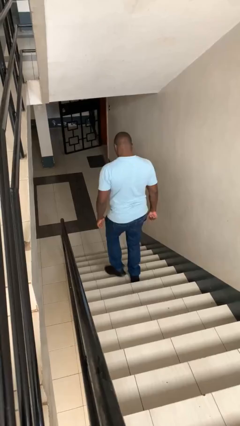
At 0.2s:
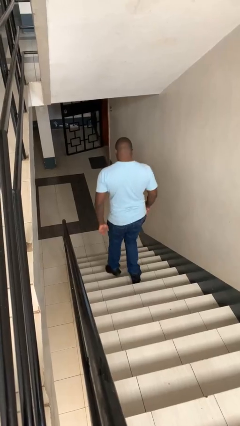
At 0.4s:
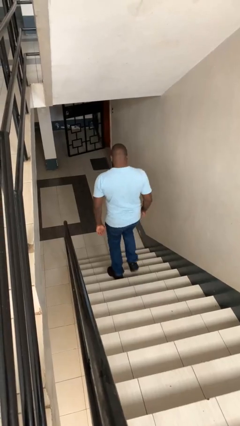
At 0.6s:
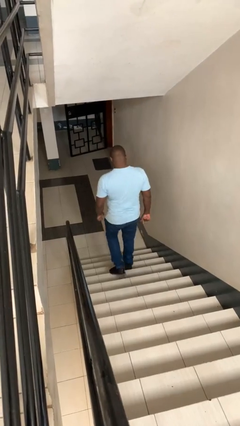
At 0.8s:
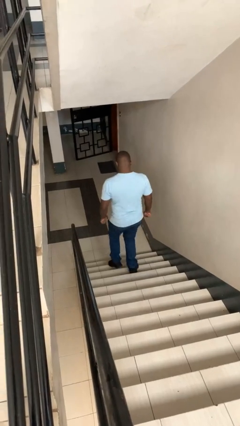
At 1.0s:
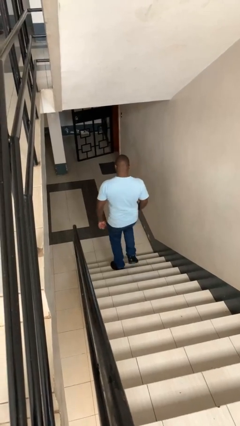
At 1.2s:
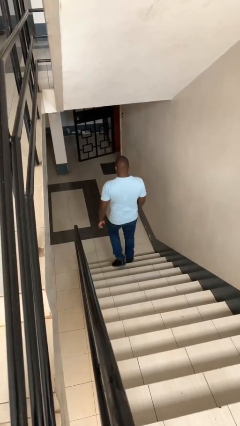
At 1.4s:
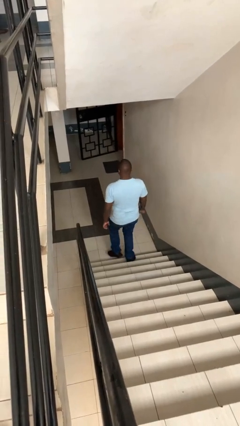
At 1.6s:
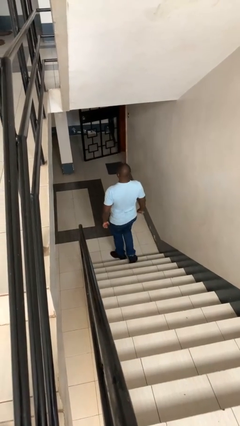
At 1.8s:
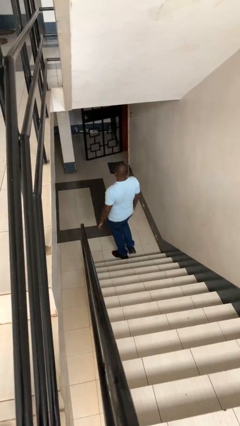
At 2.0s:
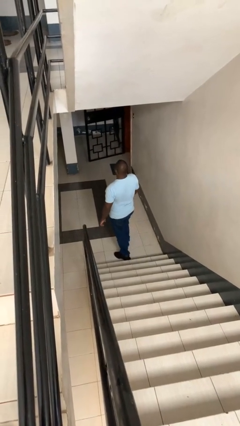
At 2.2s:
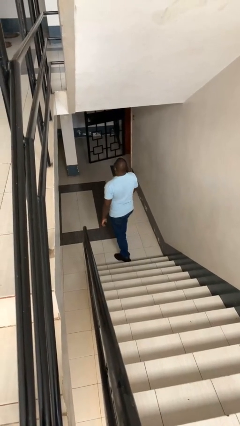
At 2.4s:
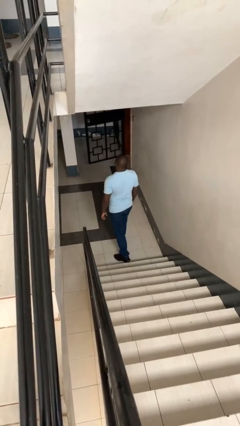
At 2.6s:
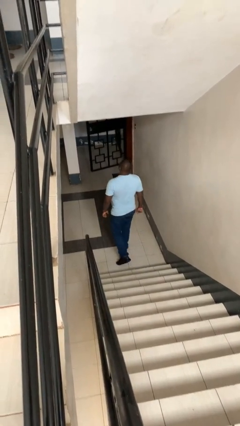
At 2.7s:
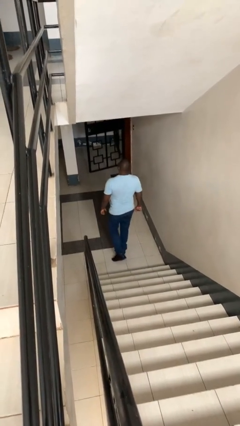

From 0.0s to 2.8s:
person climbs down stairs

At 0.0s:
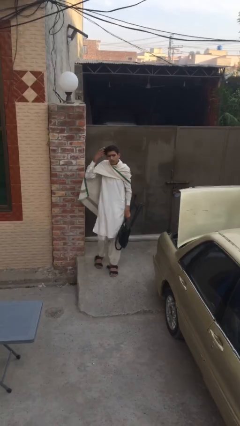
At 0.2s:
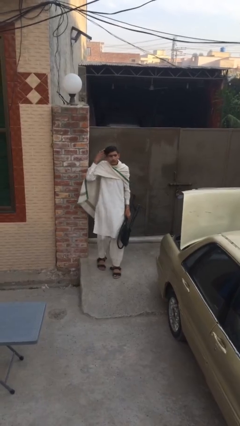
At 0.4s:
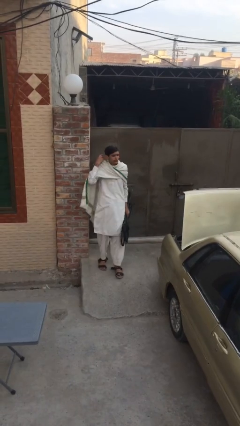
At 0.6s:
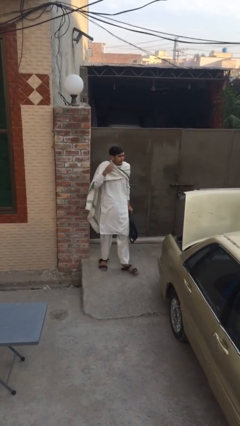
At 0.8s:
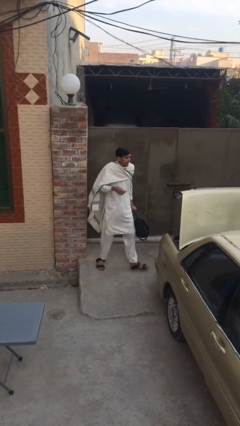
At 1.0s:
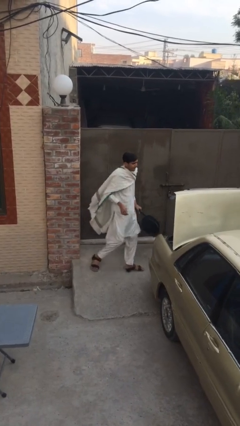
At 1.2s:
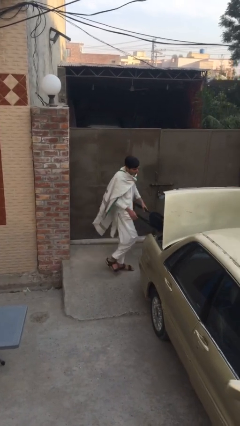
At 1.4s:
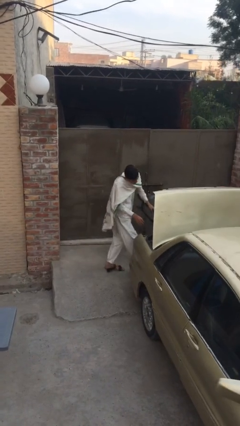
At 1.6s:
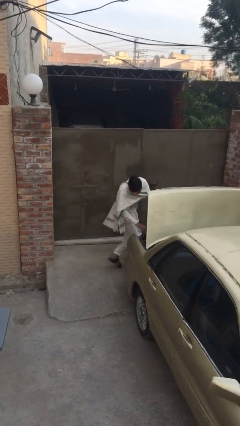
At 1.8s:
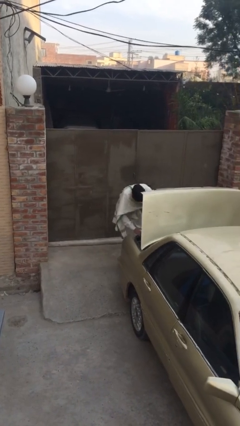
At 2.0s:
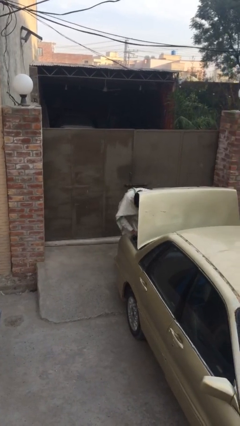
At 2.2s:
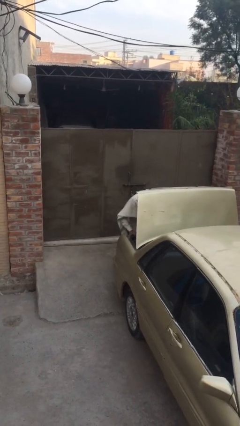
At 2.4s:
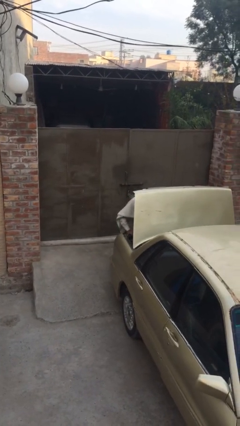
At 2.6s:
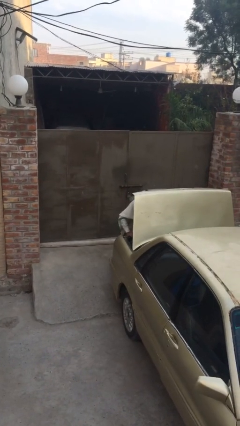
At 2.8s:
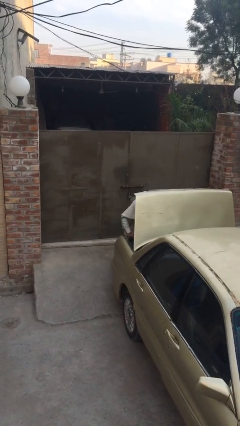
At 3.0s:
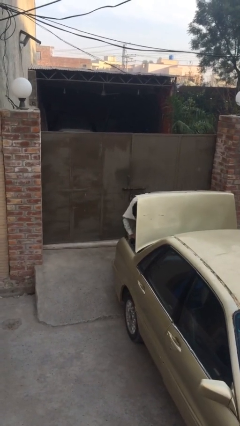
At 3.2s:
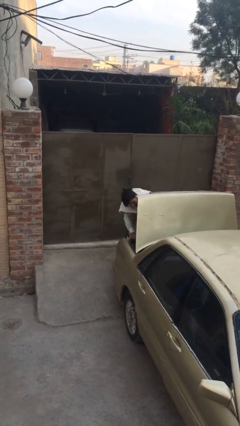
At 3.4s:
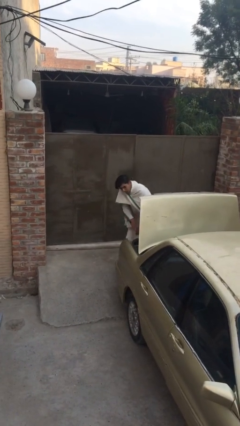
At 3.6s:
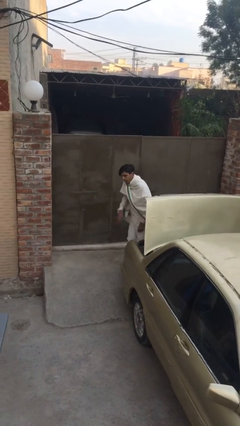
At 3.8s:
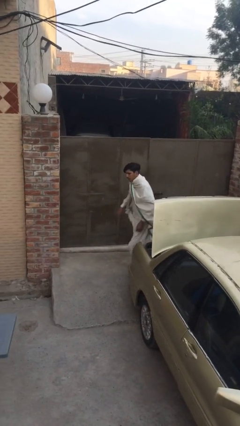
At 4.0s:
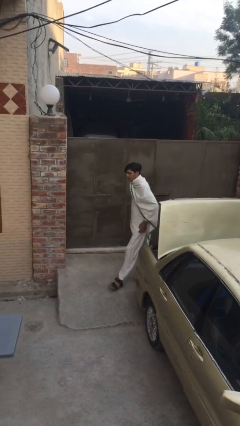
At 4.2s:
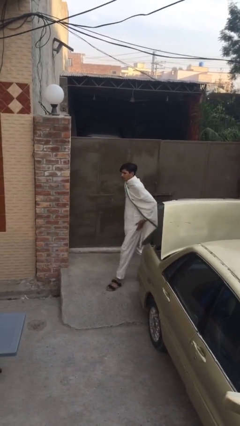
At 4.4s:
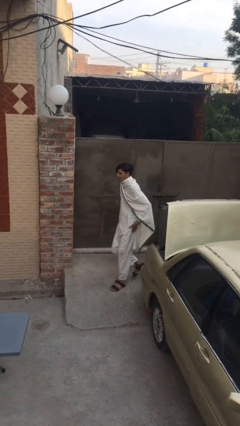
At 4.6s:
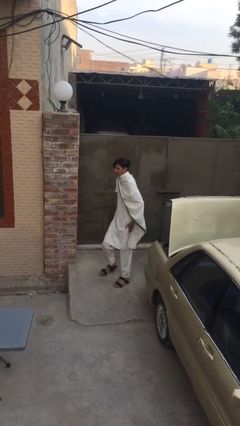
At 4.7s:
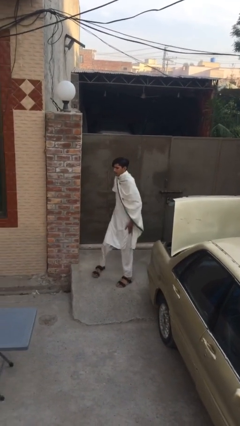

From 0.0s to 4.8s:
person loads car

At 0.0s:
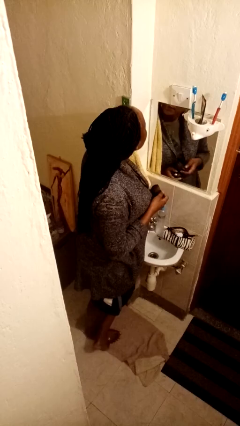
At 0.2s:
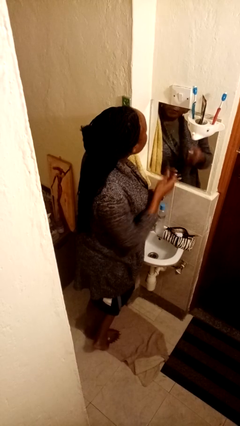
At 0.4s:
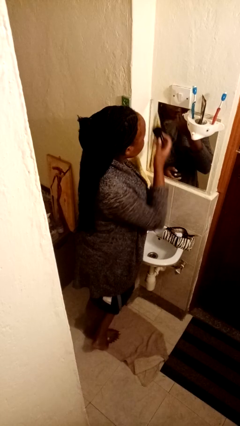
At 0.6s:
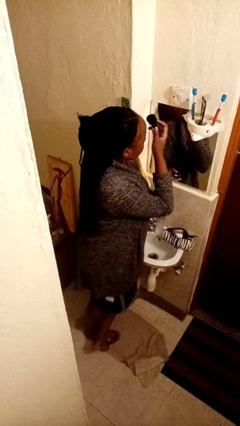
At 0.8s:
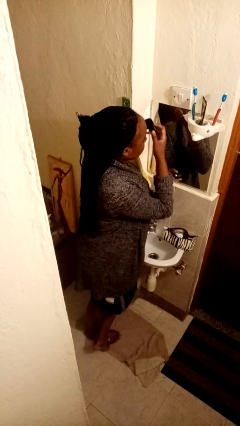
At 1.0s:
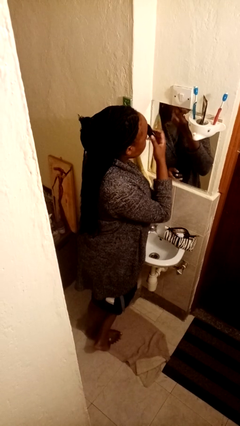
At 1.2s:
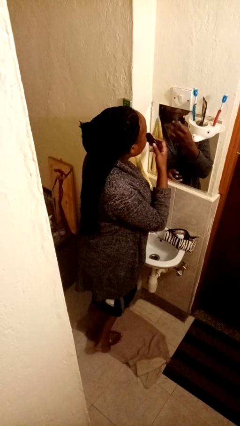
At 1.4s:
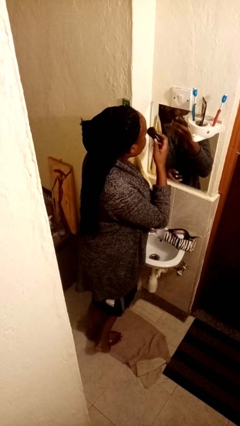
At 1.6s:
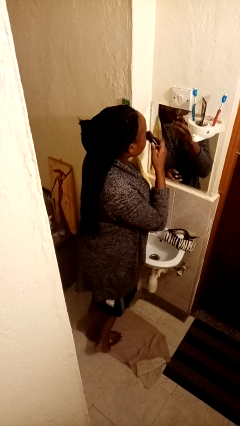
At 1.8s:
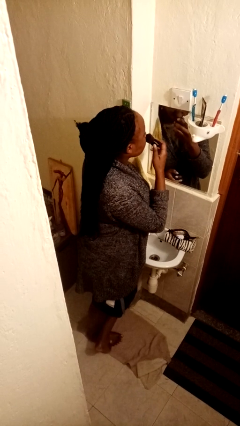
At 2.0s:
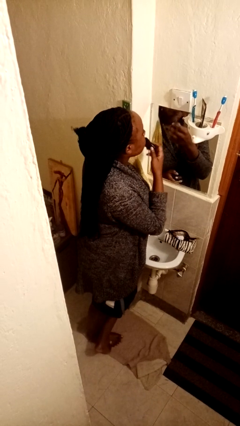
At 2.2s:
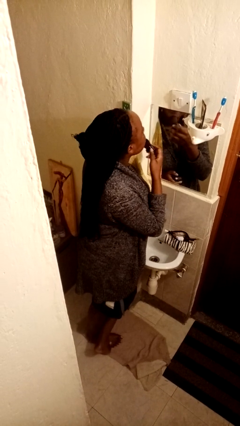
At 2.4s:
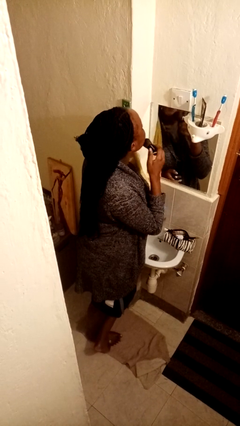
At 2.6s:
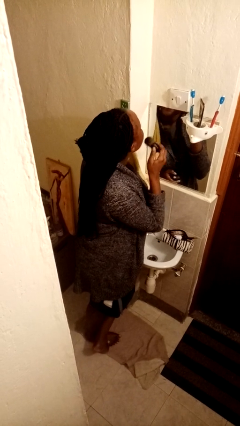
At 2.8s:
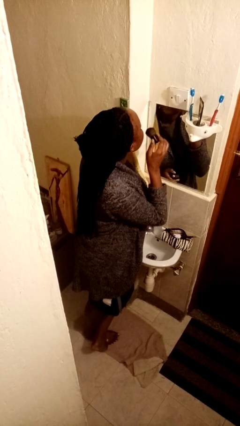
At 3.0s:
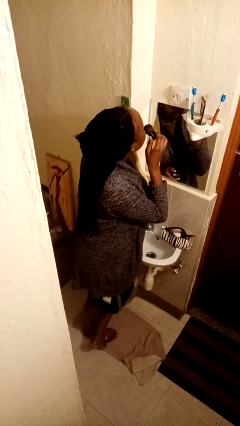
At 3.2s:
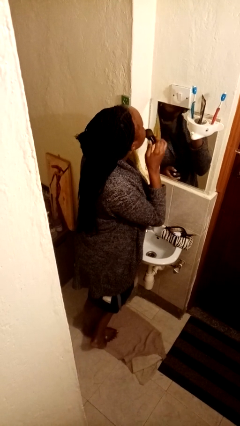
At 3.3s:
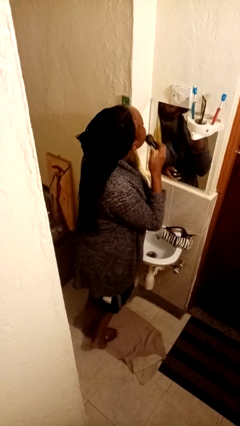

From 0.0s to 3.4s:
person applies foundation makeup

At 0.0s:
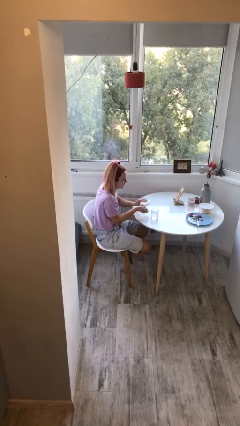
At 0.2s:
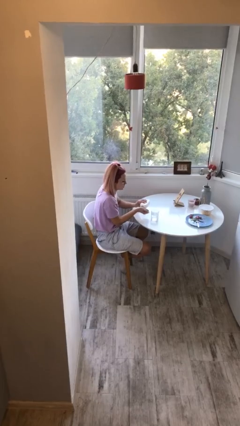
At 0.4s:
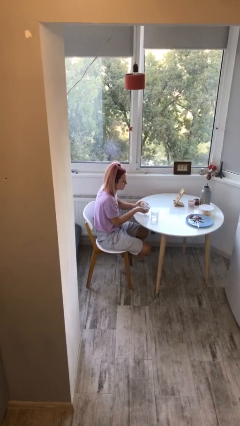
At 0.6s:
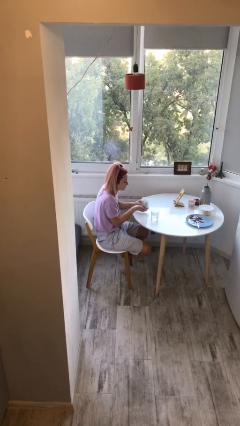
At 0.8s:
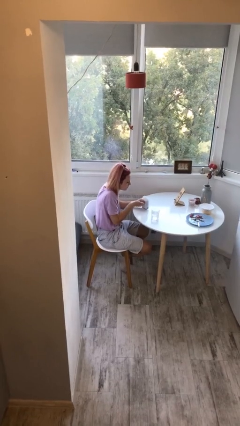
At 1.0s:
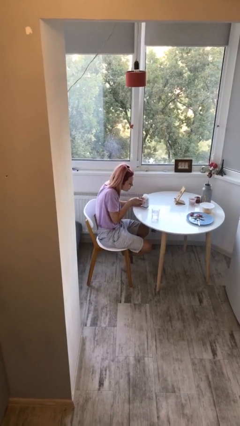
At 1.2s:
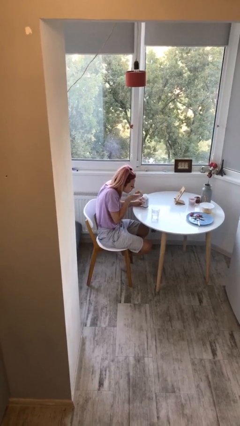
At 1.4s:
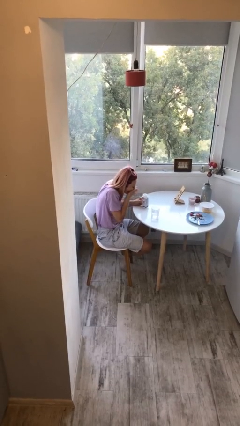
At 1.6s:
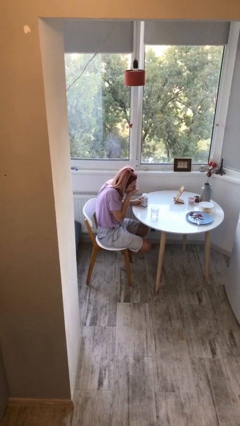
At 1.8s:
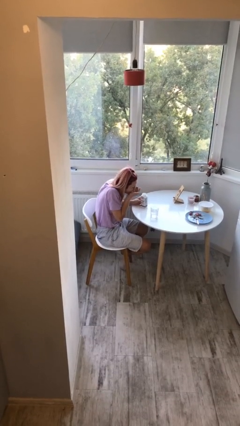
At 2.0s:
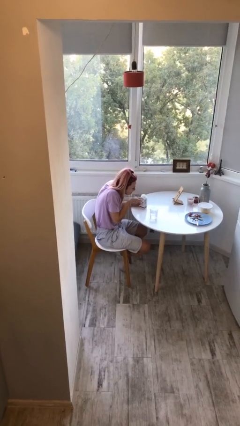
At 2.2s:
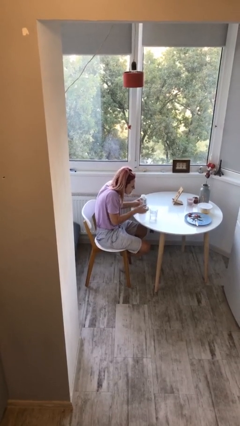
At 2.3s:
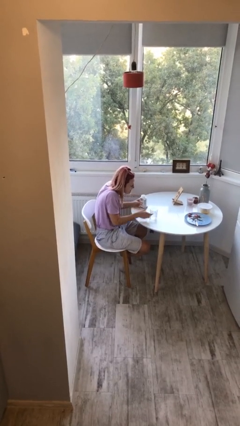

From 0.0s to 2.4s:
person takes medicine pills

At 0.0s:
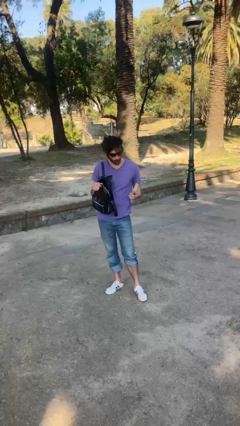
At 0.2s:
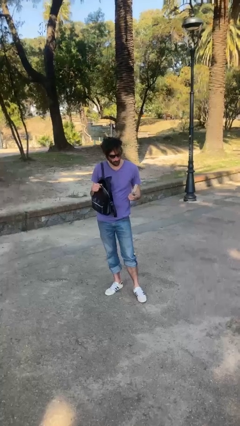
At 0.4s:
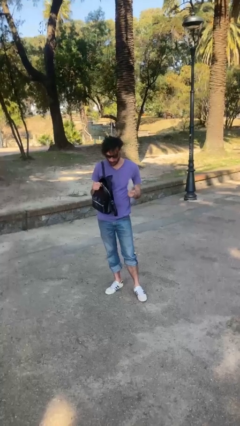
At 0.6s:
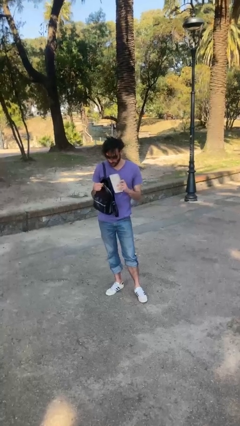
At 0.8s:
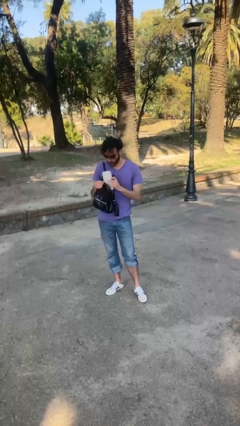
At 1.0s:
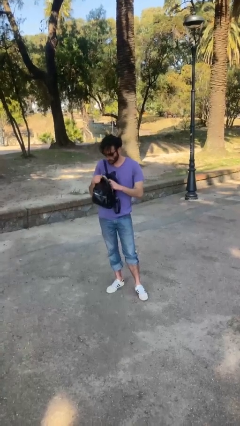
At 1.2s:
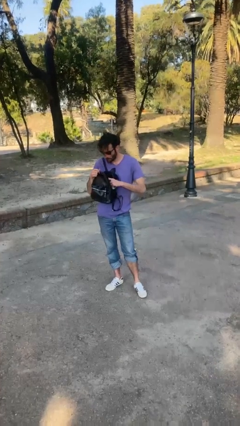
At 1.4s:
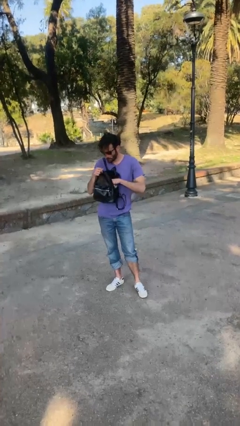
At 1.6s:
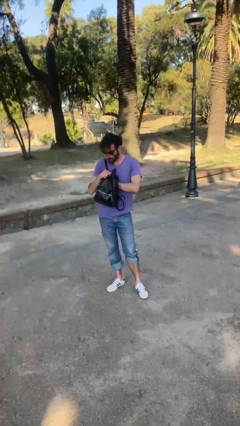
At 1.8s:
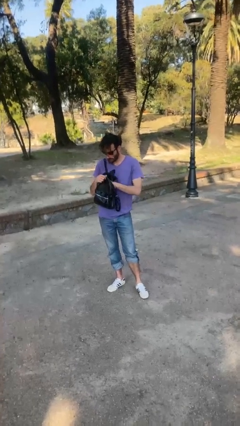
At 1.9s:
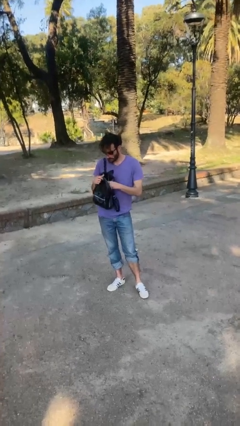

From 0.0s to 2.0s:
person puts object into purse

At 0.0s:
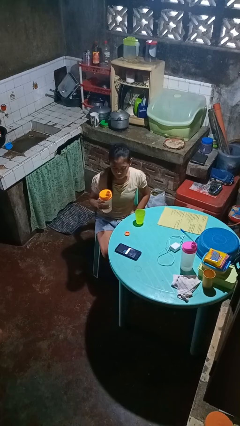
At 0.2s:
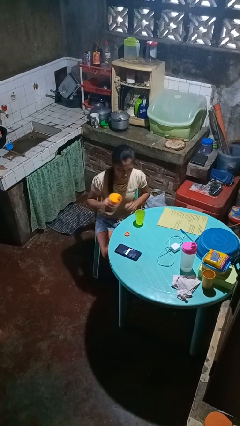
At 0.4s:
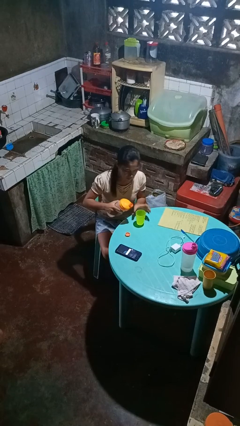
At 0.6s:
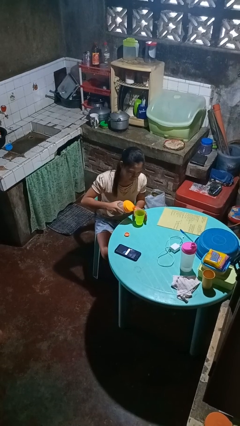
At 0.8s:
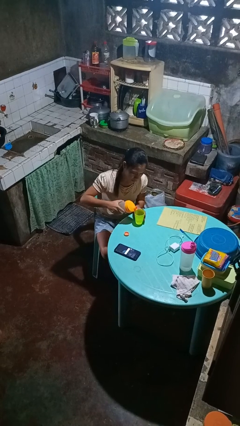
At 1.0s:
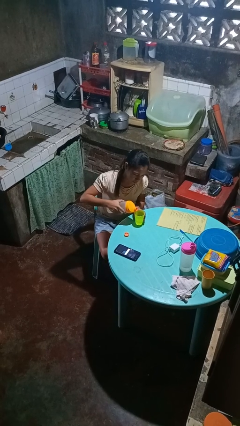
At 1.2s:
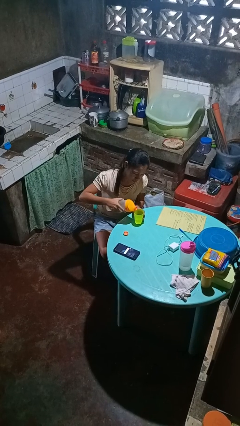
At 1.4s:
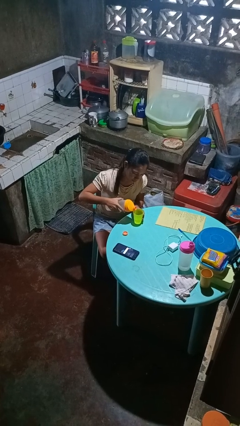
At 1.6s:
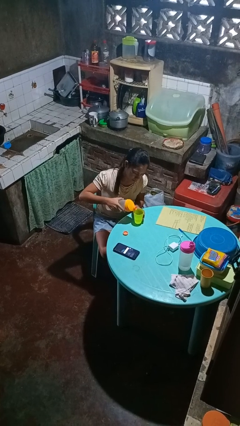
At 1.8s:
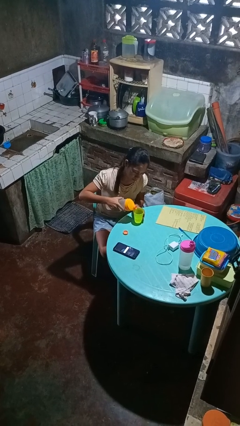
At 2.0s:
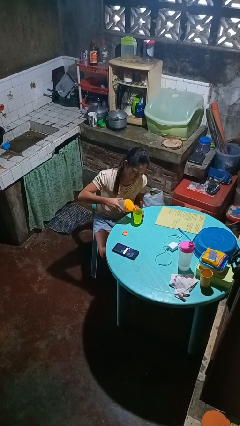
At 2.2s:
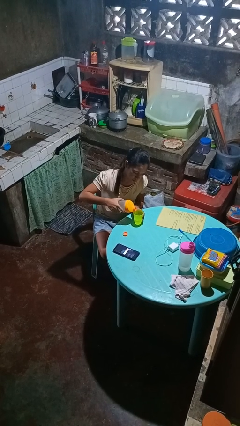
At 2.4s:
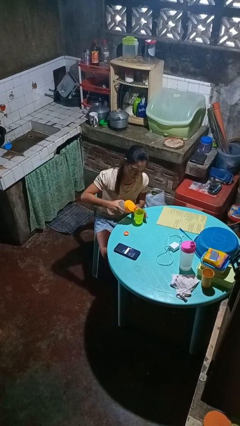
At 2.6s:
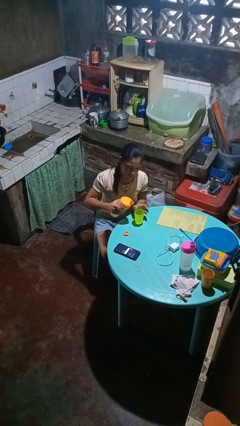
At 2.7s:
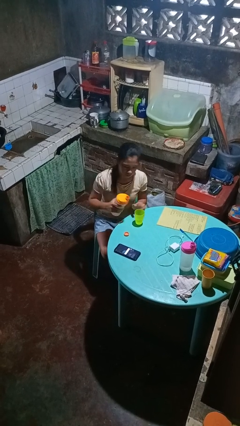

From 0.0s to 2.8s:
person pours liquid into cup
